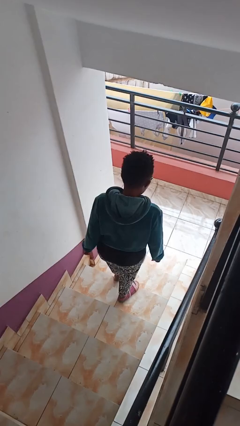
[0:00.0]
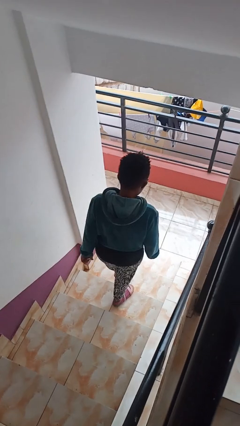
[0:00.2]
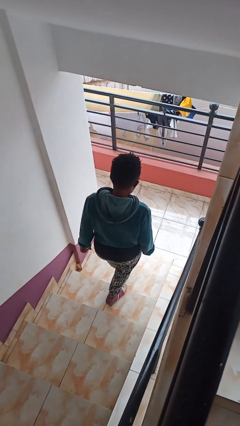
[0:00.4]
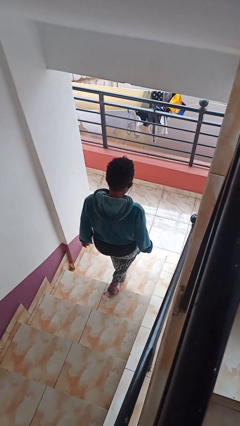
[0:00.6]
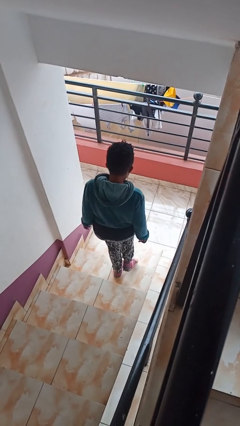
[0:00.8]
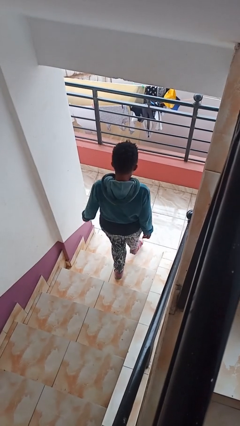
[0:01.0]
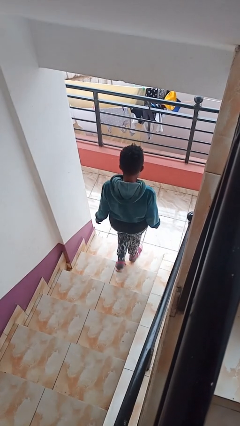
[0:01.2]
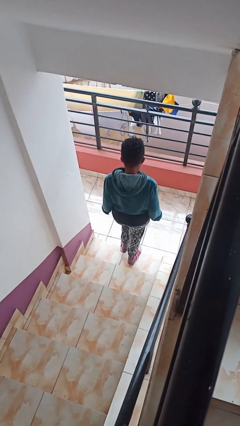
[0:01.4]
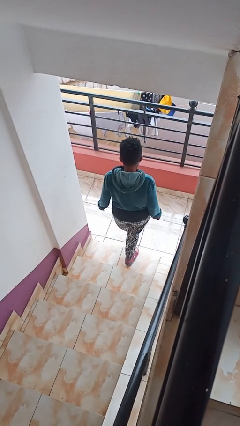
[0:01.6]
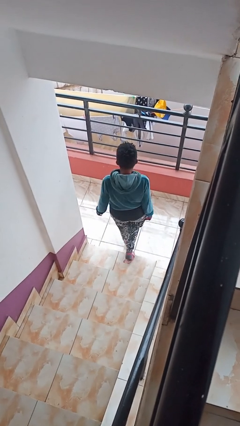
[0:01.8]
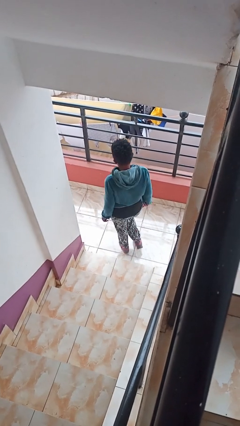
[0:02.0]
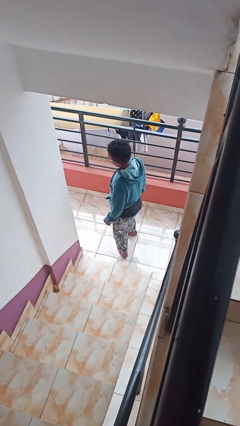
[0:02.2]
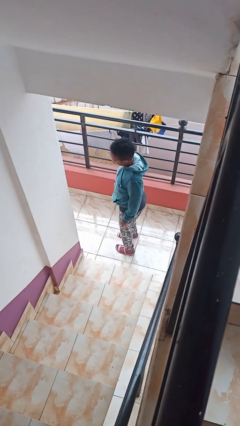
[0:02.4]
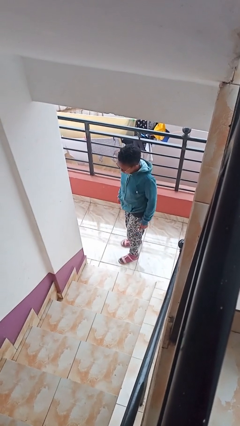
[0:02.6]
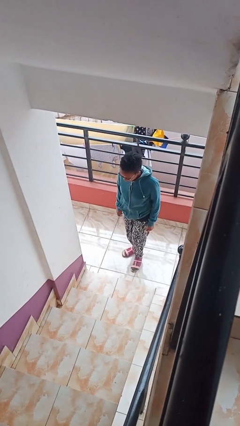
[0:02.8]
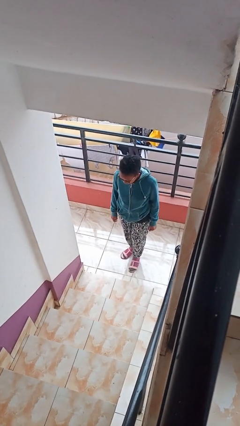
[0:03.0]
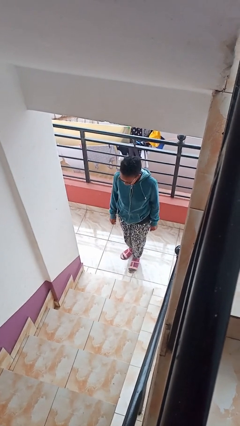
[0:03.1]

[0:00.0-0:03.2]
person climbs down stairs

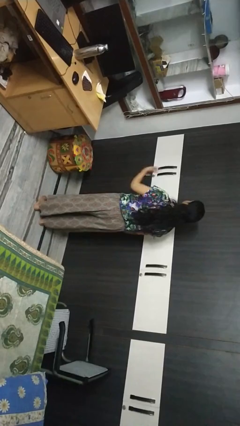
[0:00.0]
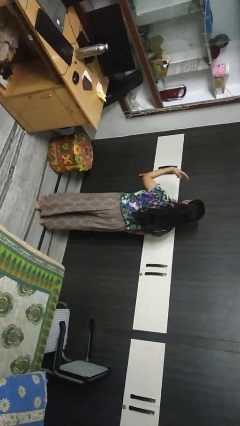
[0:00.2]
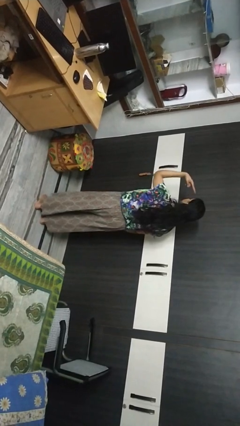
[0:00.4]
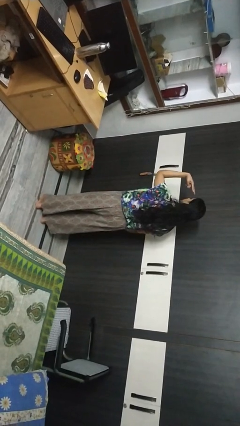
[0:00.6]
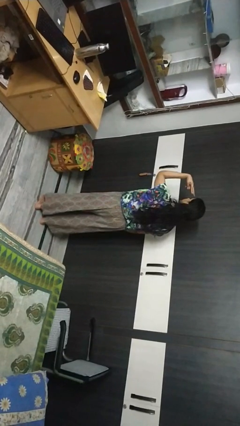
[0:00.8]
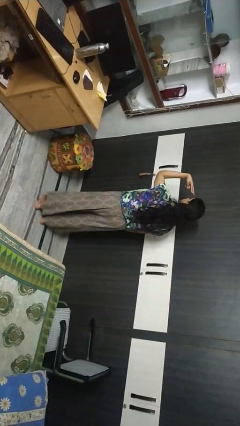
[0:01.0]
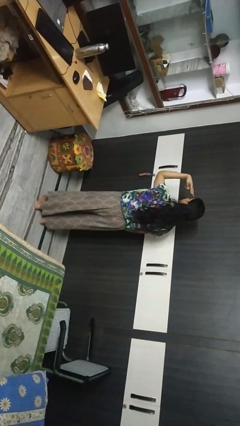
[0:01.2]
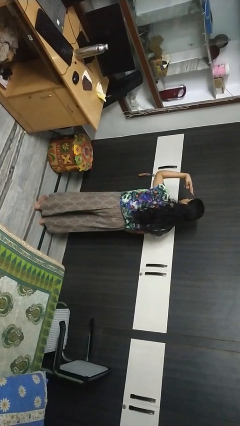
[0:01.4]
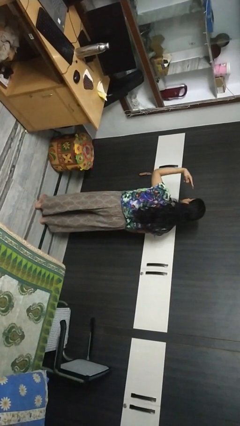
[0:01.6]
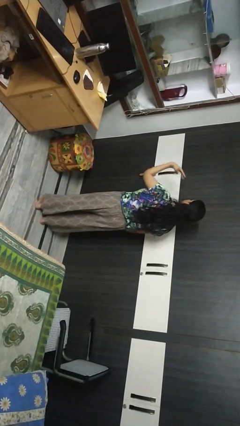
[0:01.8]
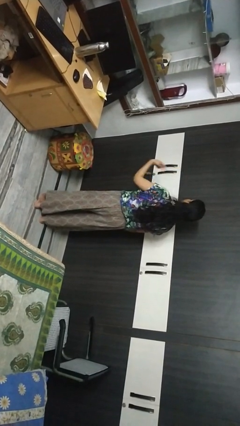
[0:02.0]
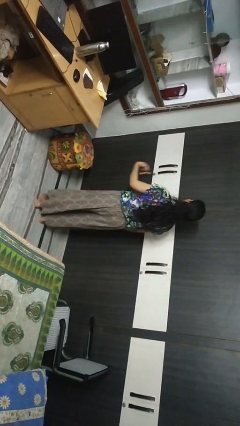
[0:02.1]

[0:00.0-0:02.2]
person gestures watch closely

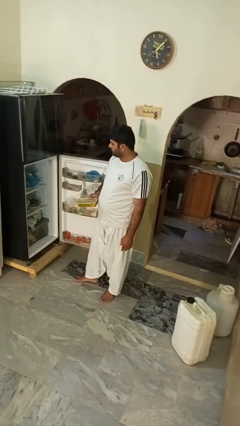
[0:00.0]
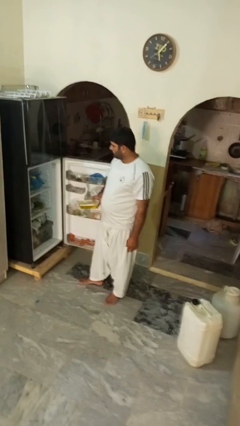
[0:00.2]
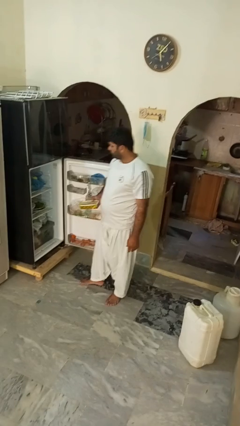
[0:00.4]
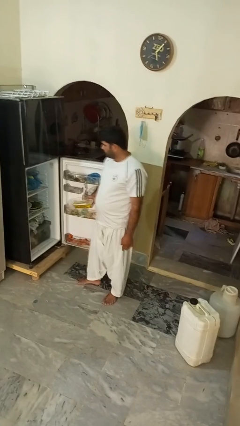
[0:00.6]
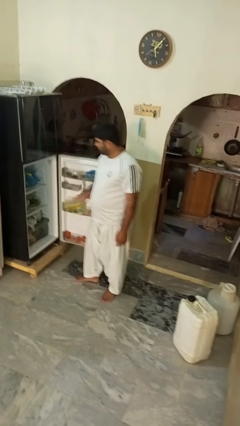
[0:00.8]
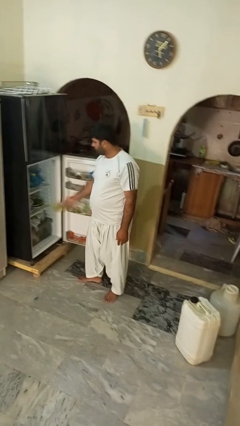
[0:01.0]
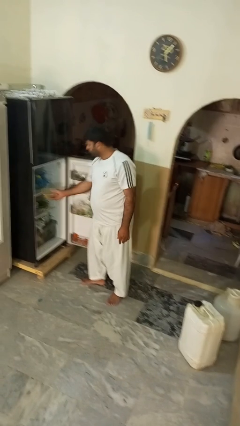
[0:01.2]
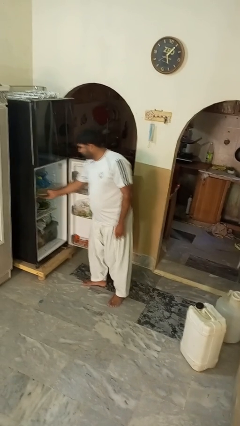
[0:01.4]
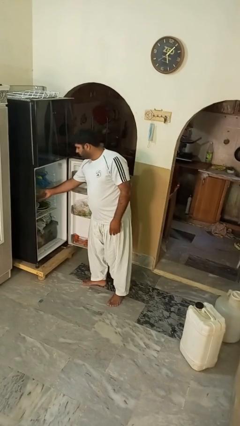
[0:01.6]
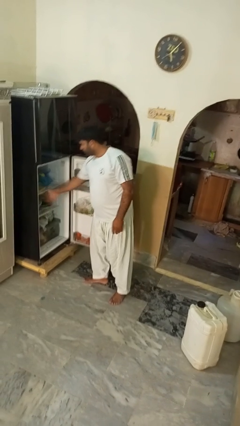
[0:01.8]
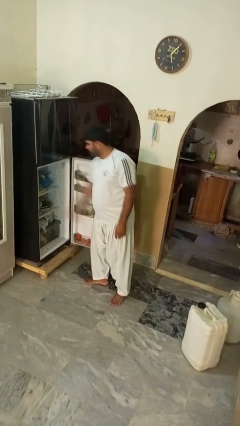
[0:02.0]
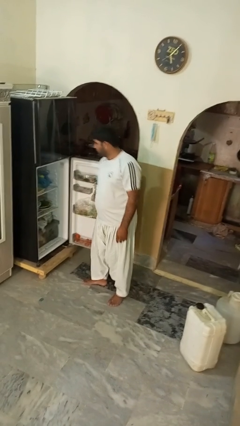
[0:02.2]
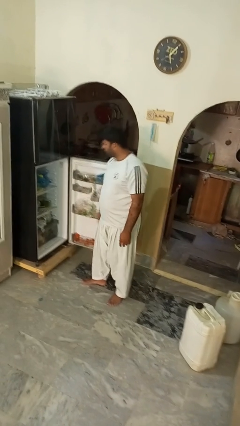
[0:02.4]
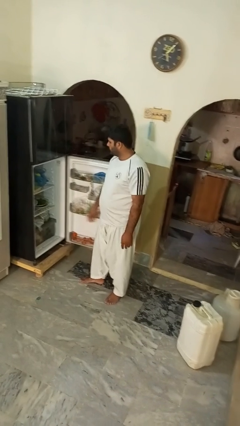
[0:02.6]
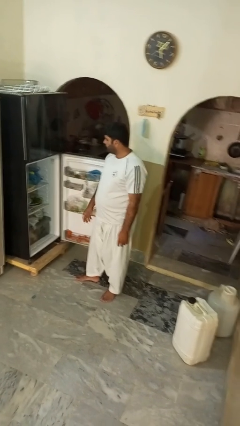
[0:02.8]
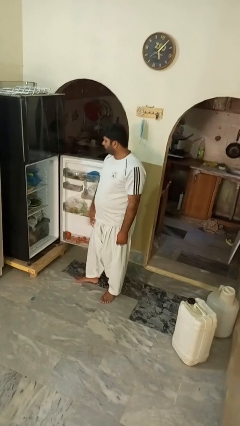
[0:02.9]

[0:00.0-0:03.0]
person puts object into refrigerator

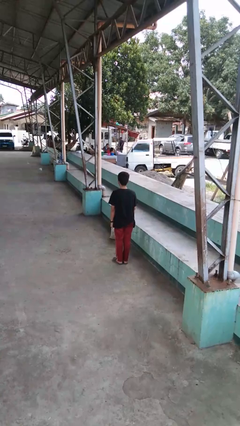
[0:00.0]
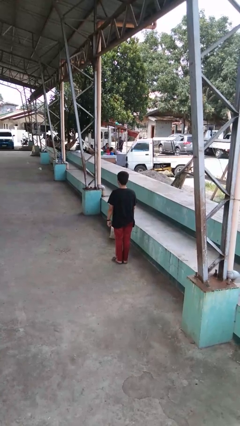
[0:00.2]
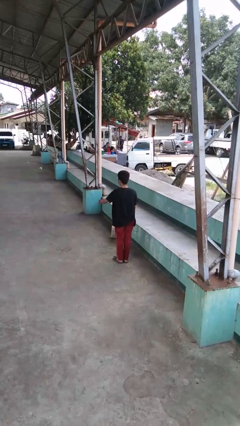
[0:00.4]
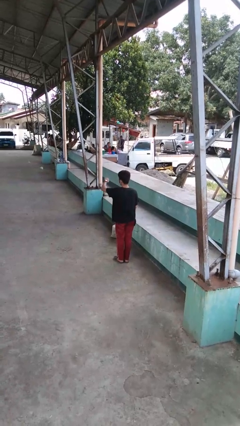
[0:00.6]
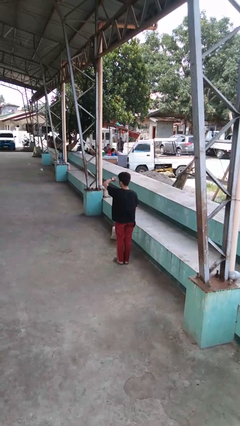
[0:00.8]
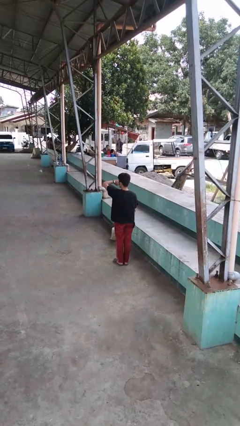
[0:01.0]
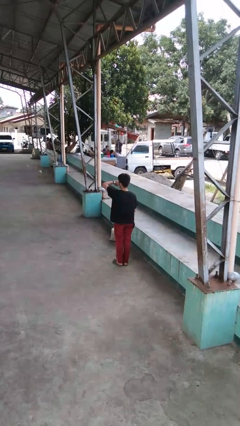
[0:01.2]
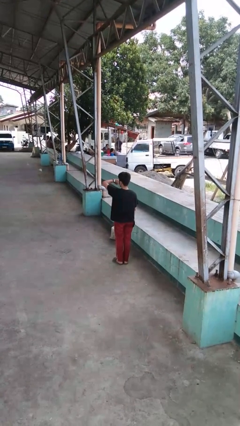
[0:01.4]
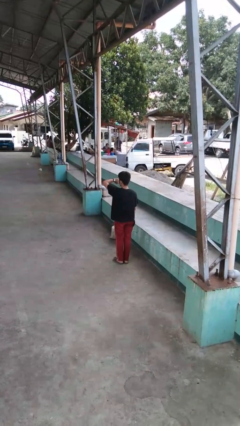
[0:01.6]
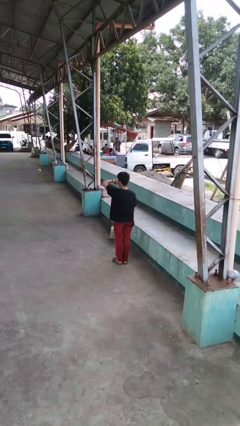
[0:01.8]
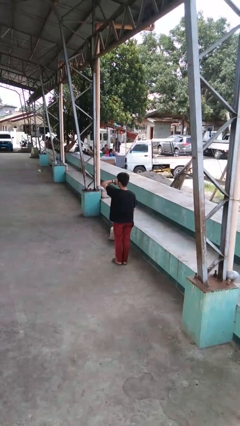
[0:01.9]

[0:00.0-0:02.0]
person looks at wristwatch

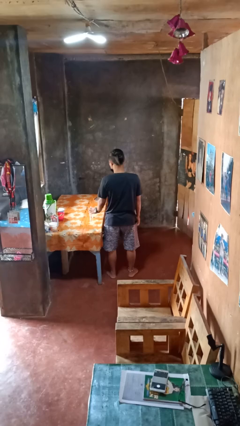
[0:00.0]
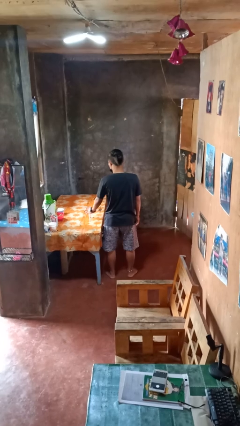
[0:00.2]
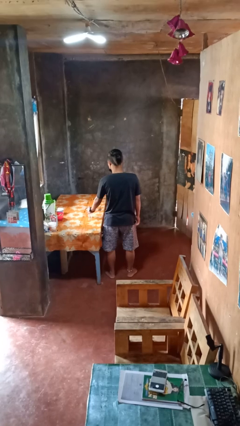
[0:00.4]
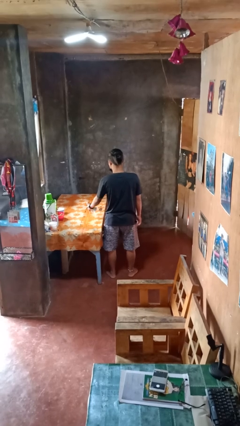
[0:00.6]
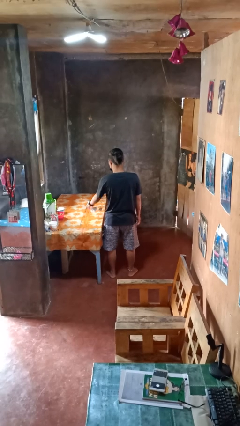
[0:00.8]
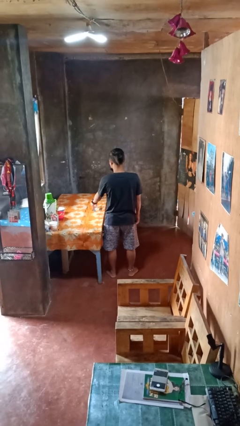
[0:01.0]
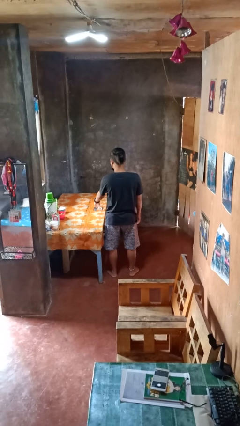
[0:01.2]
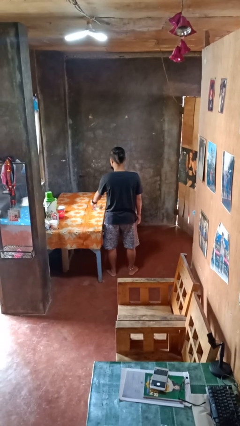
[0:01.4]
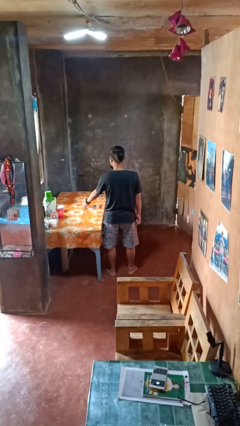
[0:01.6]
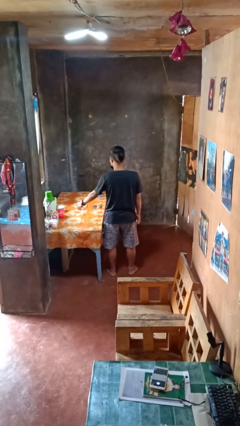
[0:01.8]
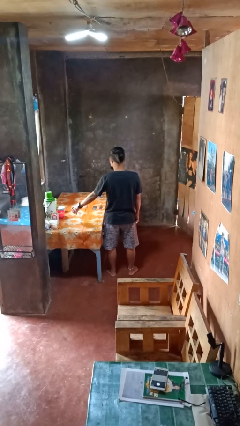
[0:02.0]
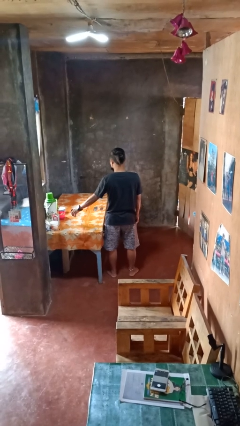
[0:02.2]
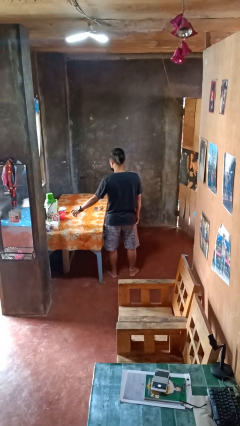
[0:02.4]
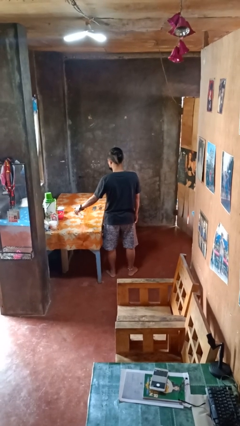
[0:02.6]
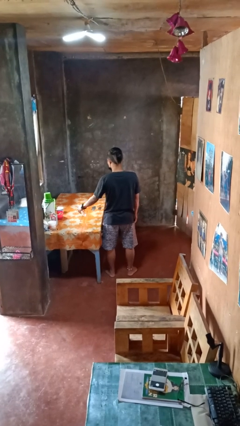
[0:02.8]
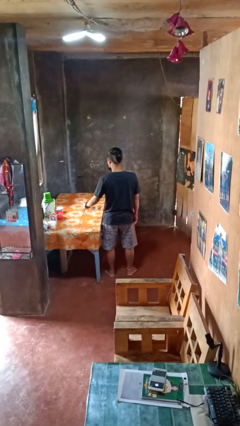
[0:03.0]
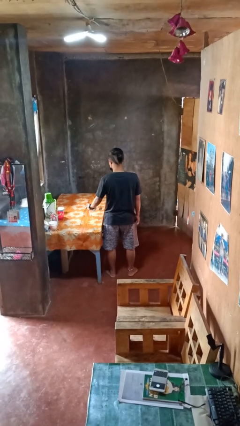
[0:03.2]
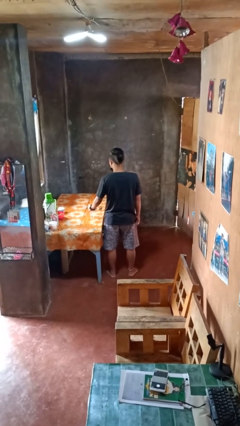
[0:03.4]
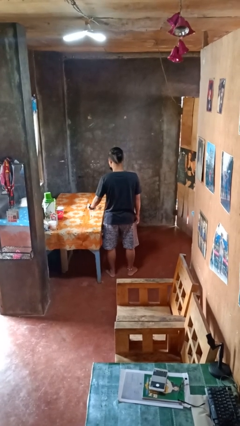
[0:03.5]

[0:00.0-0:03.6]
person sprays from bottle

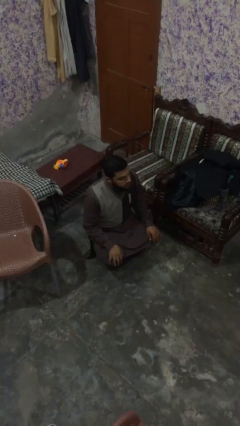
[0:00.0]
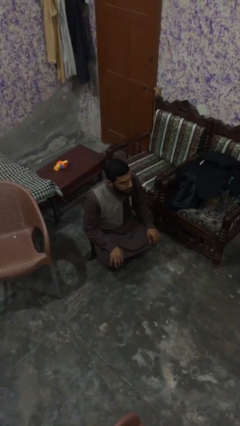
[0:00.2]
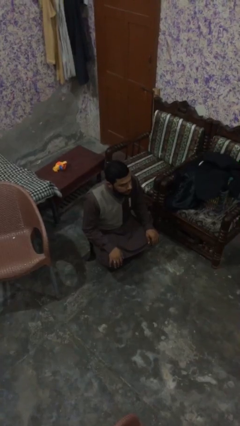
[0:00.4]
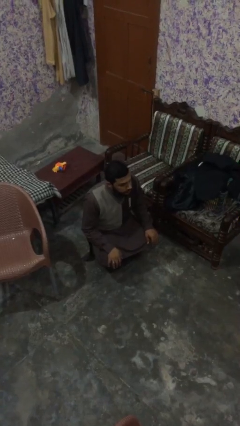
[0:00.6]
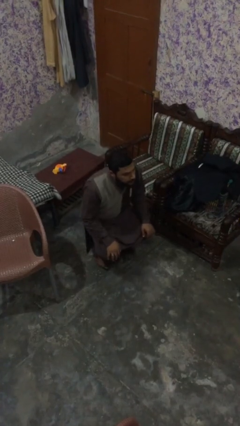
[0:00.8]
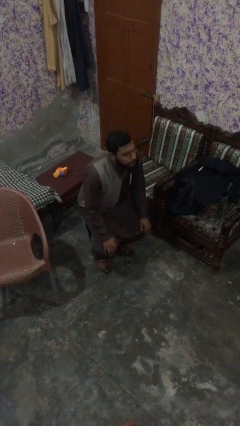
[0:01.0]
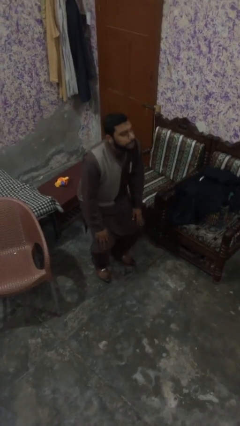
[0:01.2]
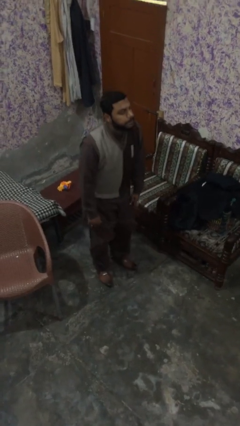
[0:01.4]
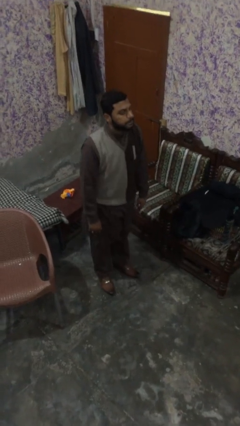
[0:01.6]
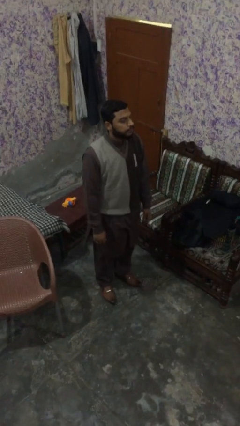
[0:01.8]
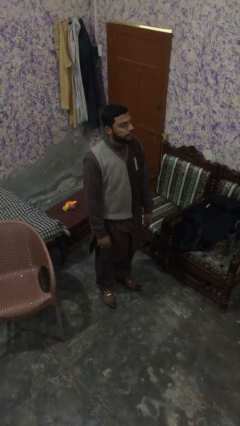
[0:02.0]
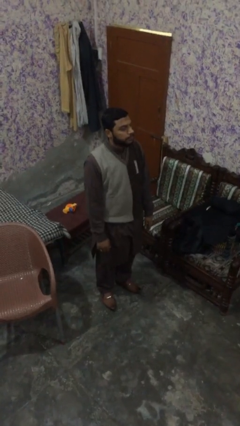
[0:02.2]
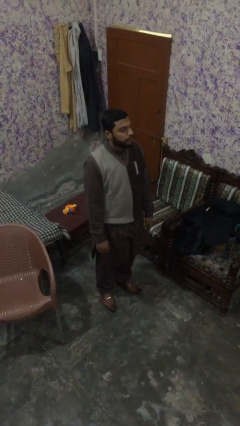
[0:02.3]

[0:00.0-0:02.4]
person stands up

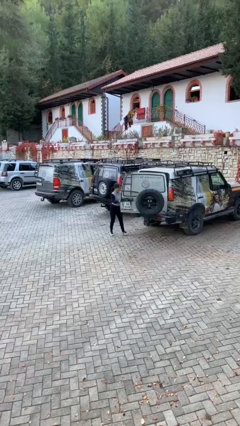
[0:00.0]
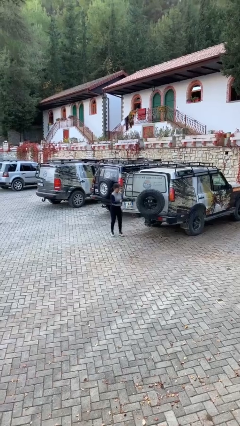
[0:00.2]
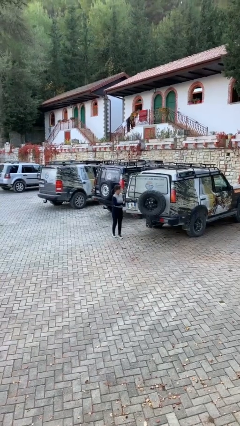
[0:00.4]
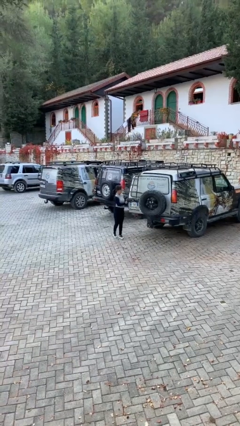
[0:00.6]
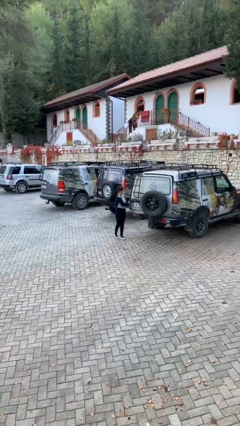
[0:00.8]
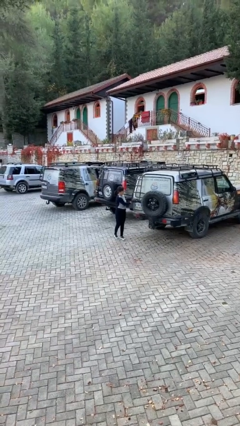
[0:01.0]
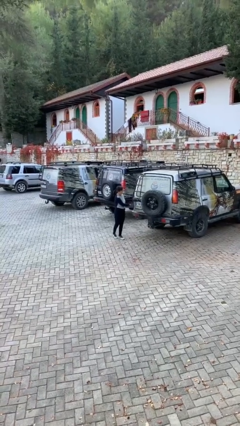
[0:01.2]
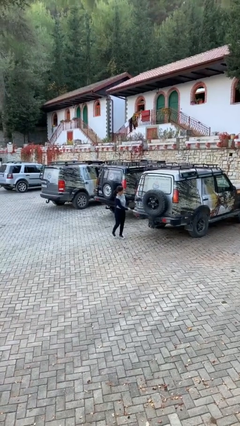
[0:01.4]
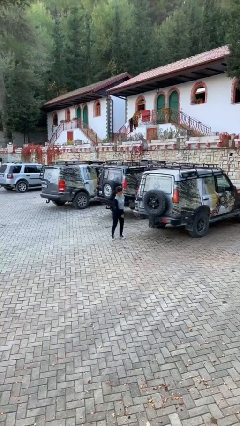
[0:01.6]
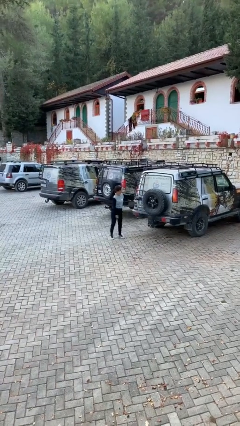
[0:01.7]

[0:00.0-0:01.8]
person closes car door
